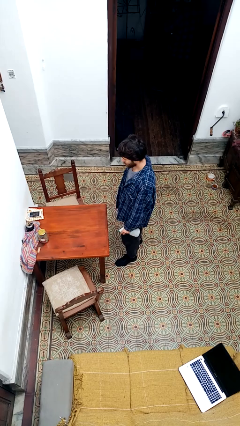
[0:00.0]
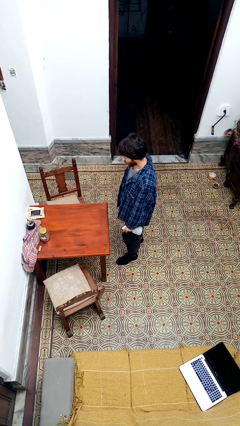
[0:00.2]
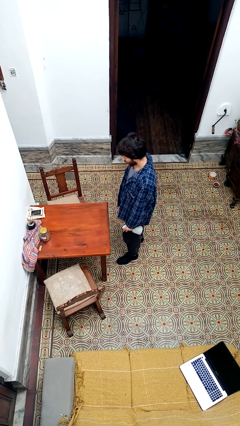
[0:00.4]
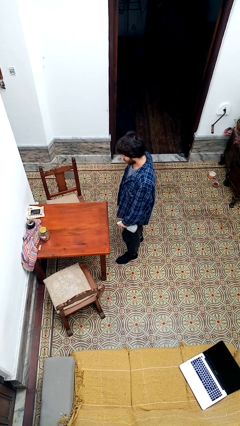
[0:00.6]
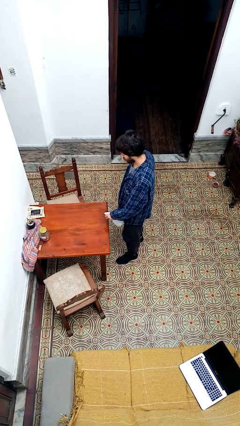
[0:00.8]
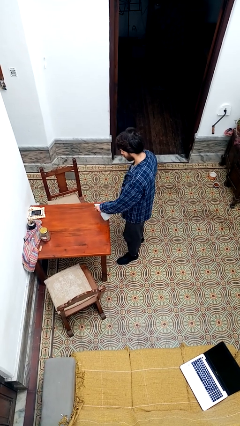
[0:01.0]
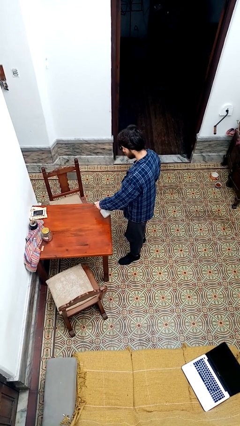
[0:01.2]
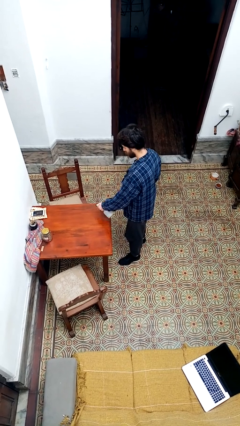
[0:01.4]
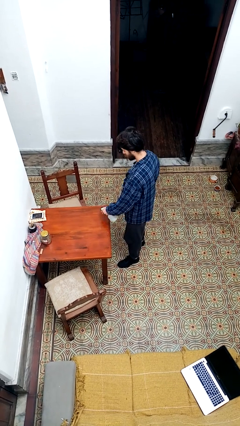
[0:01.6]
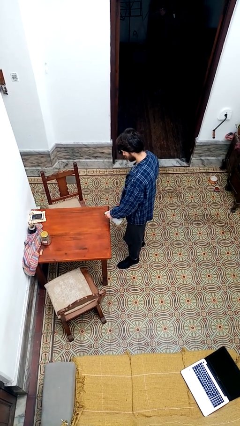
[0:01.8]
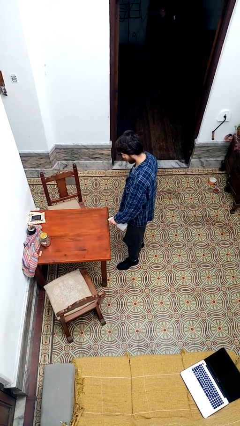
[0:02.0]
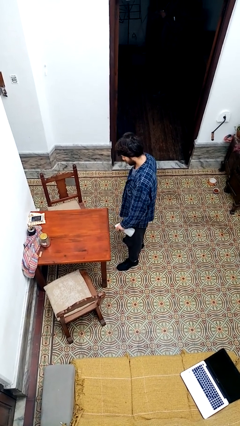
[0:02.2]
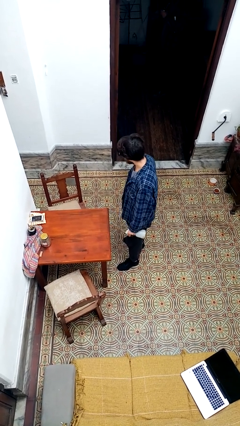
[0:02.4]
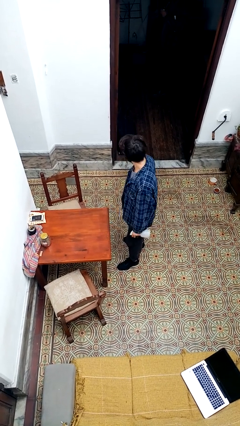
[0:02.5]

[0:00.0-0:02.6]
person sprays from bottle

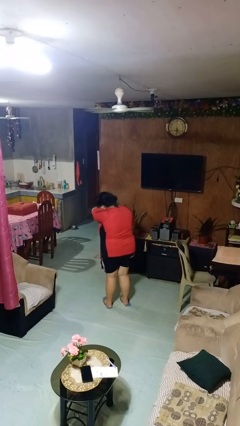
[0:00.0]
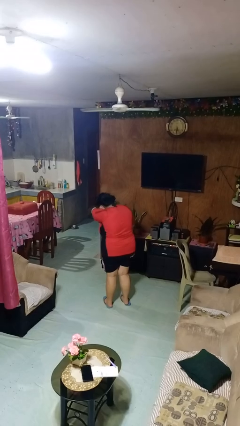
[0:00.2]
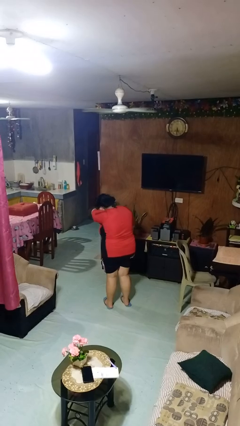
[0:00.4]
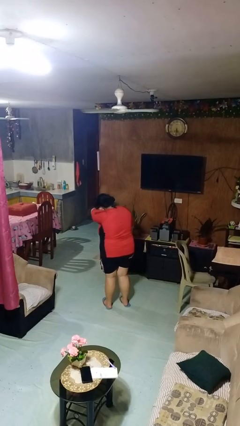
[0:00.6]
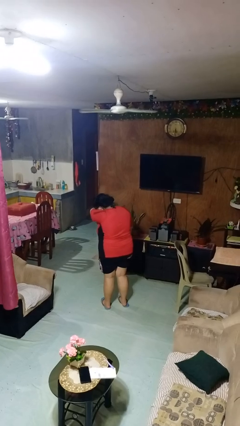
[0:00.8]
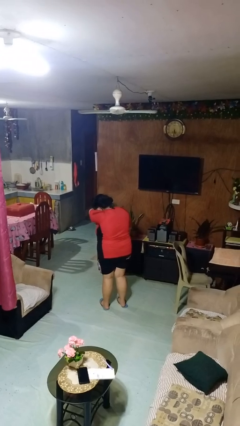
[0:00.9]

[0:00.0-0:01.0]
person sneezes into arm

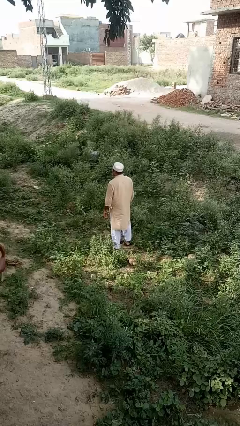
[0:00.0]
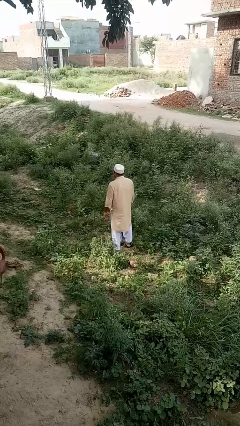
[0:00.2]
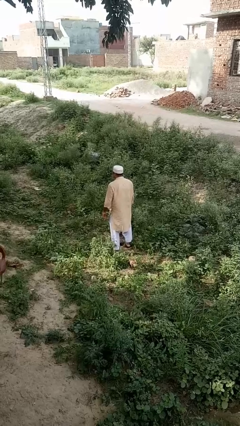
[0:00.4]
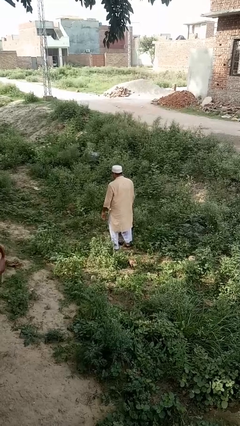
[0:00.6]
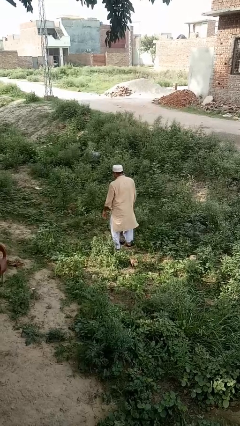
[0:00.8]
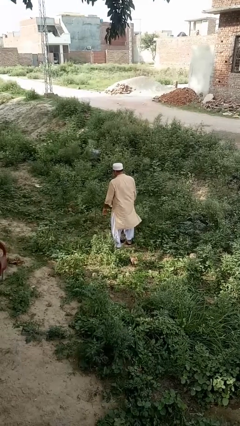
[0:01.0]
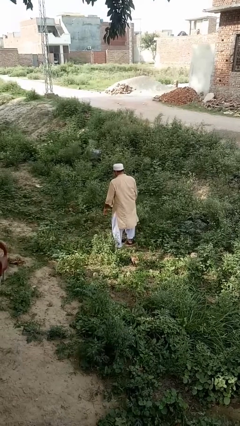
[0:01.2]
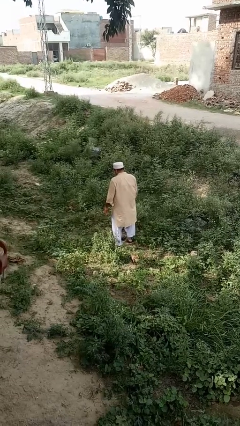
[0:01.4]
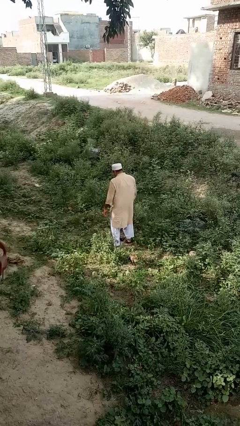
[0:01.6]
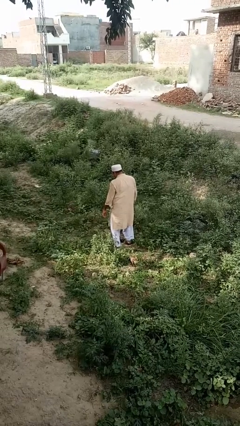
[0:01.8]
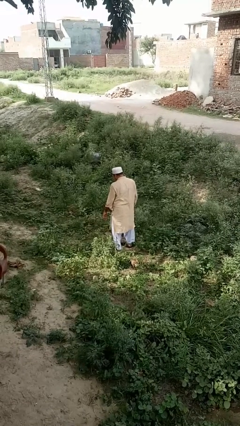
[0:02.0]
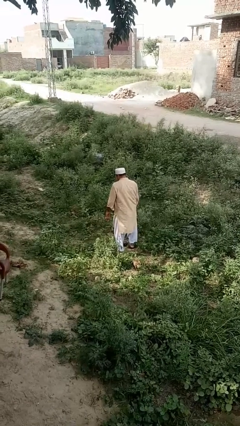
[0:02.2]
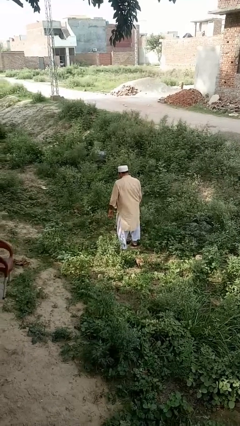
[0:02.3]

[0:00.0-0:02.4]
person wiggles hips

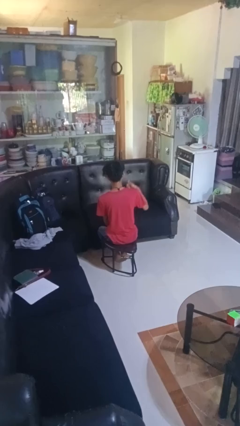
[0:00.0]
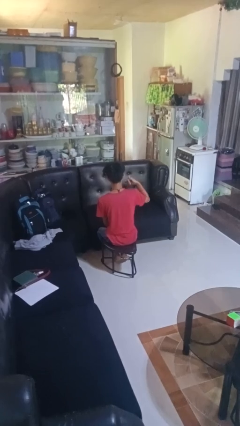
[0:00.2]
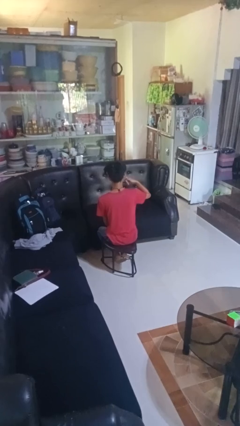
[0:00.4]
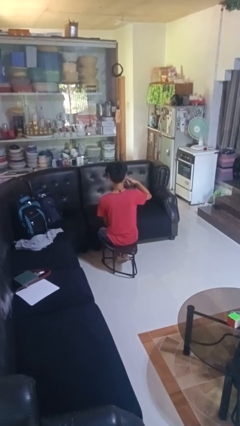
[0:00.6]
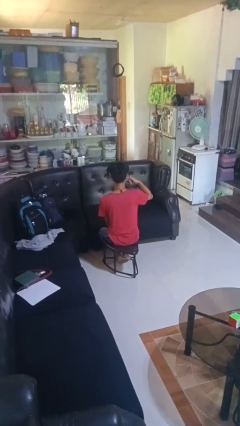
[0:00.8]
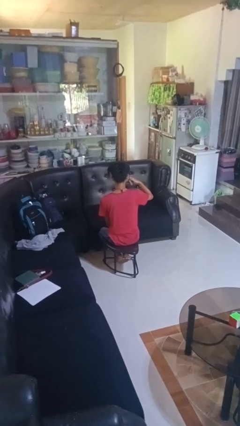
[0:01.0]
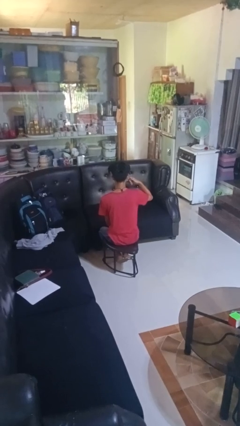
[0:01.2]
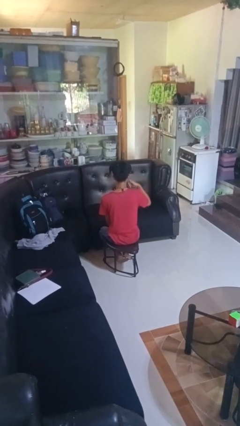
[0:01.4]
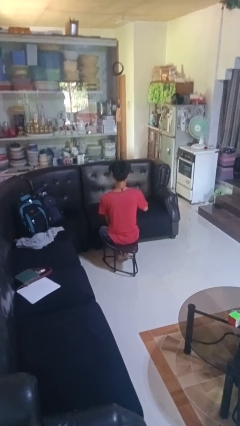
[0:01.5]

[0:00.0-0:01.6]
person gestures call me

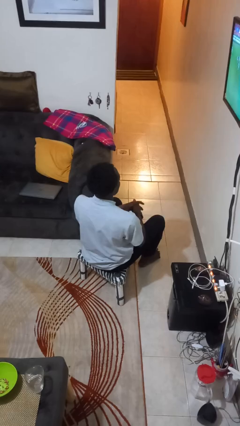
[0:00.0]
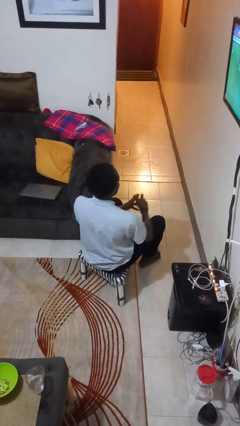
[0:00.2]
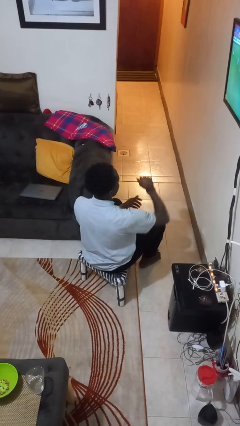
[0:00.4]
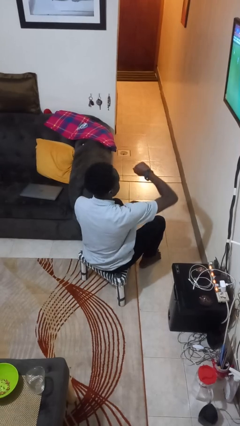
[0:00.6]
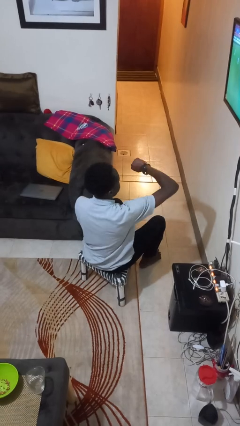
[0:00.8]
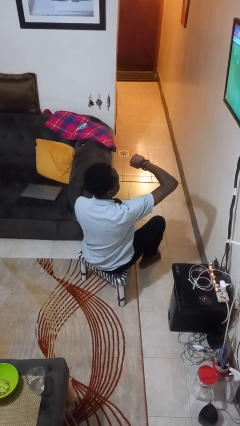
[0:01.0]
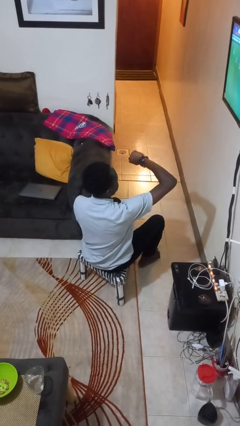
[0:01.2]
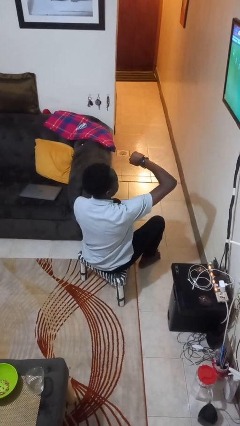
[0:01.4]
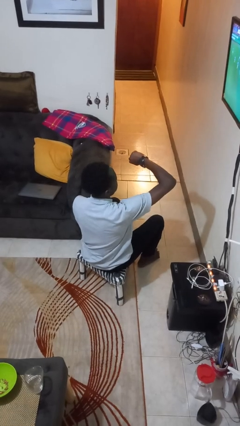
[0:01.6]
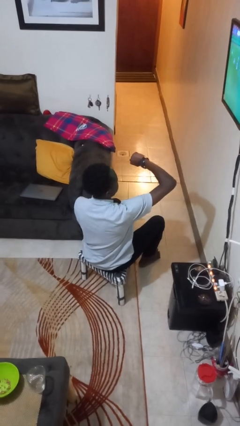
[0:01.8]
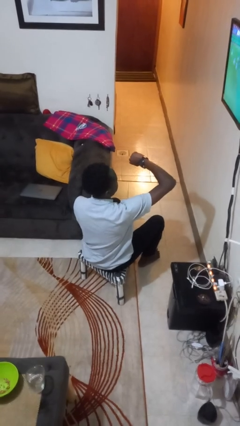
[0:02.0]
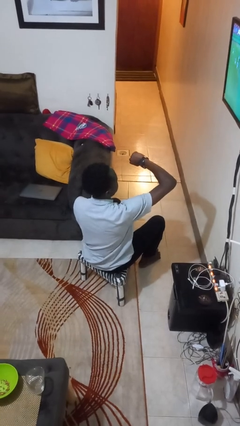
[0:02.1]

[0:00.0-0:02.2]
person looks at wristwatch

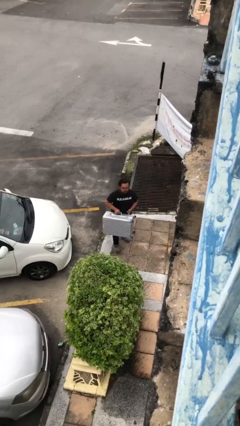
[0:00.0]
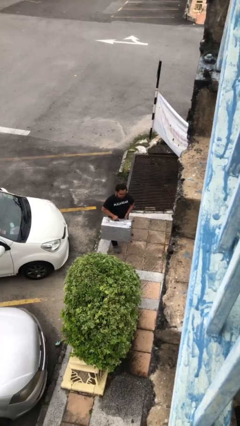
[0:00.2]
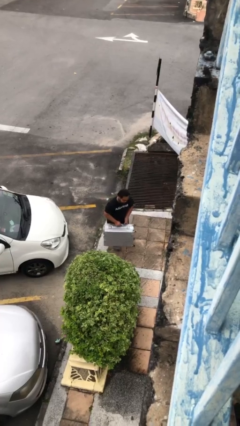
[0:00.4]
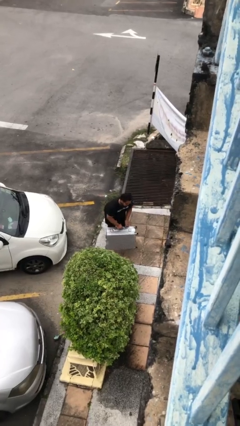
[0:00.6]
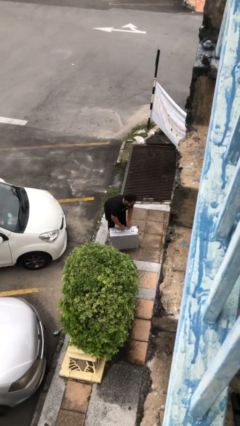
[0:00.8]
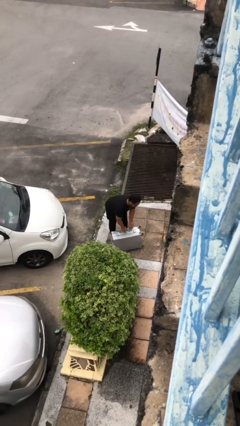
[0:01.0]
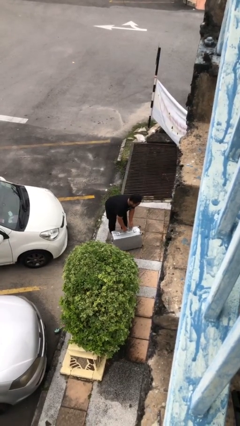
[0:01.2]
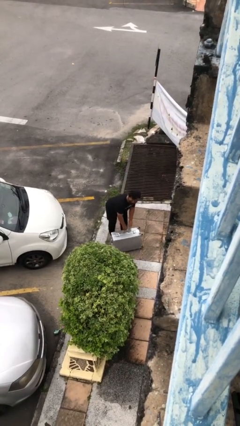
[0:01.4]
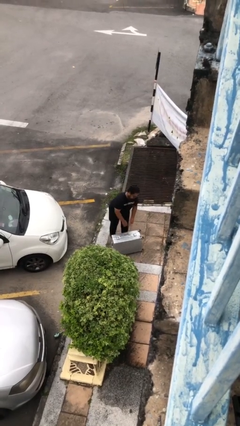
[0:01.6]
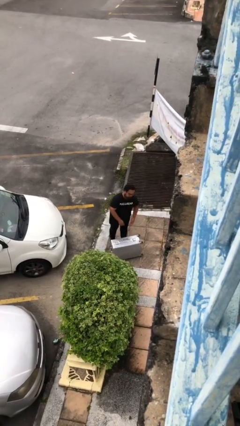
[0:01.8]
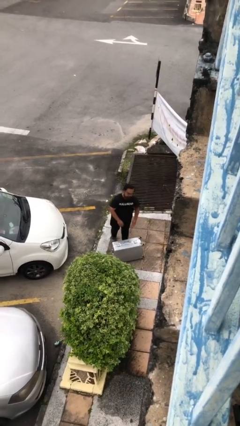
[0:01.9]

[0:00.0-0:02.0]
person puts down object on floor

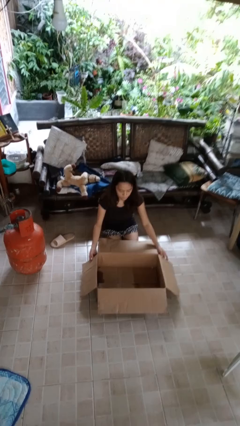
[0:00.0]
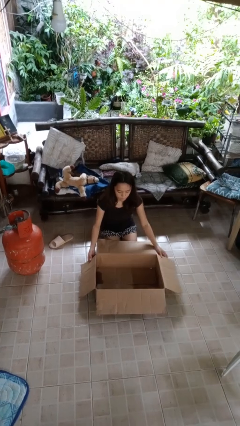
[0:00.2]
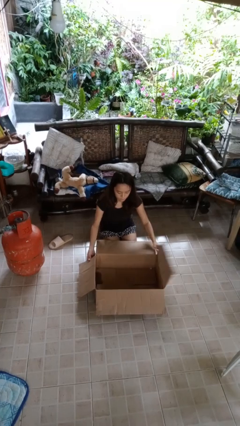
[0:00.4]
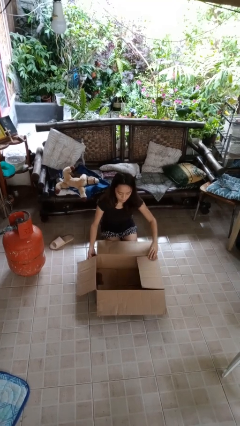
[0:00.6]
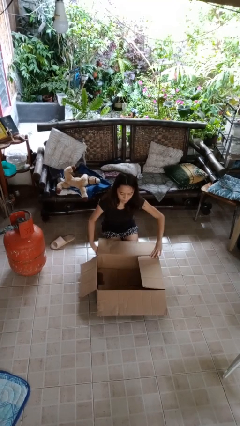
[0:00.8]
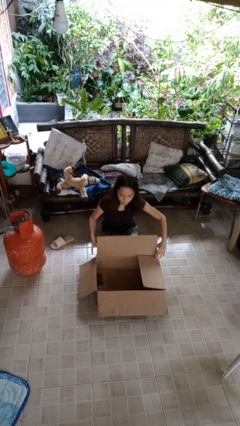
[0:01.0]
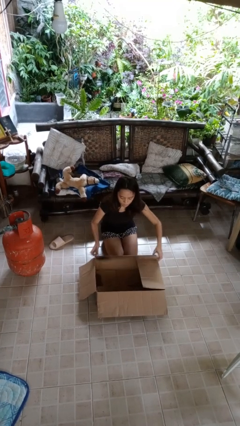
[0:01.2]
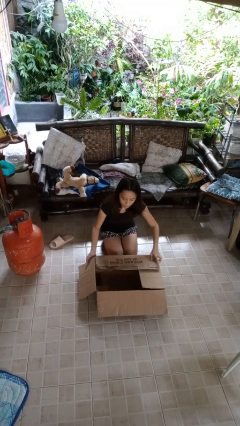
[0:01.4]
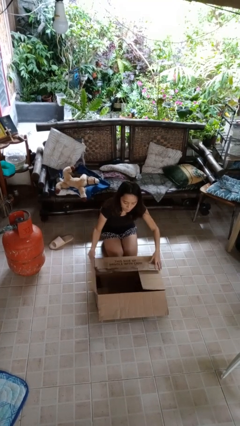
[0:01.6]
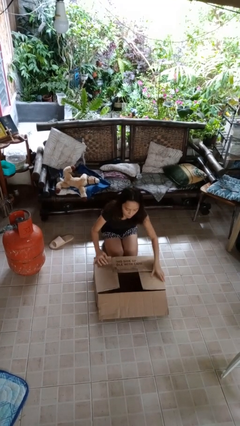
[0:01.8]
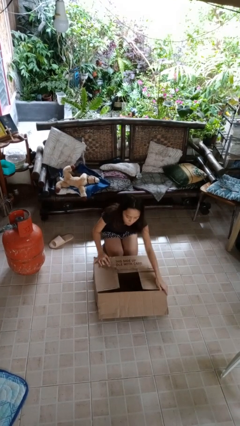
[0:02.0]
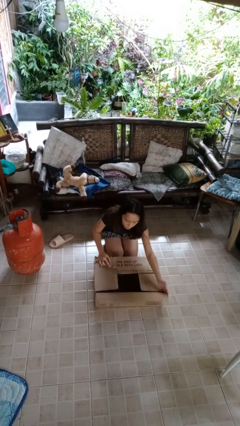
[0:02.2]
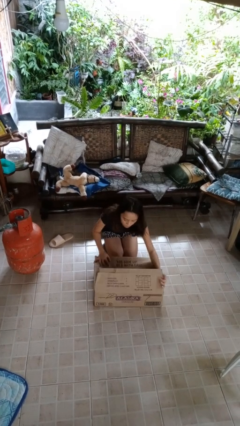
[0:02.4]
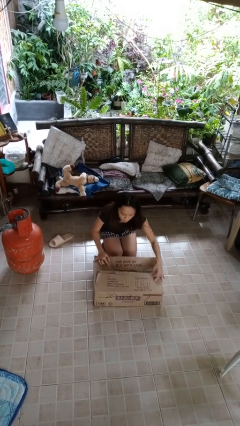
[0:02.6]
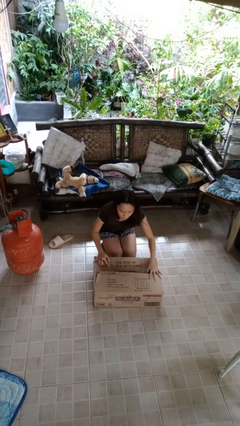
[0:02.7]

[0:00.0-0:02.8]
person closes box

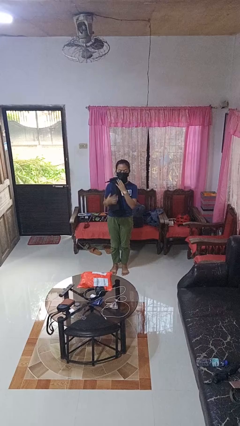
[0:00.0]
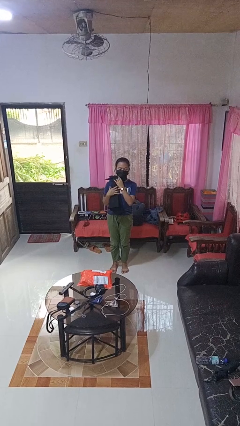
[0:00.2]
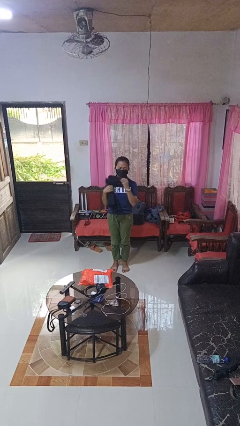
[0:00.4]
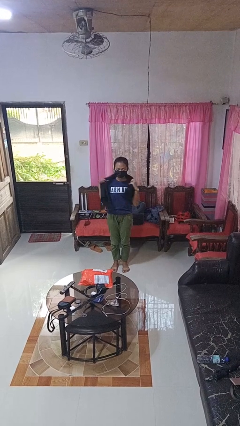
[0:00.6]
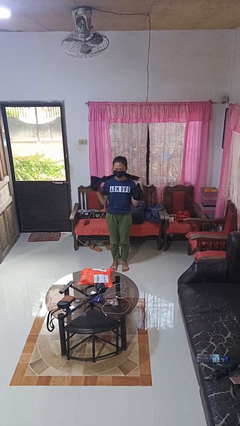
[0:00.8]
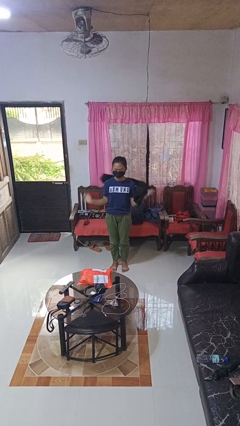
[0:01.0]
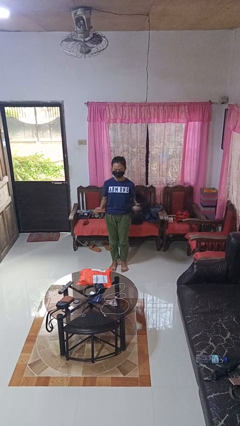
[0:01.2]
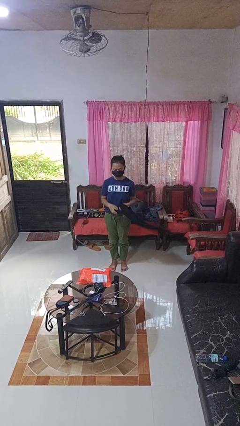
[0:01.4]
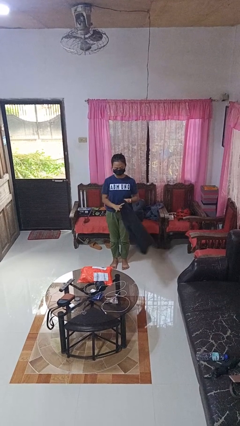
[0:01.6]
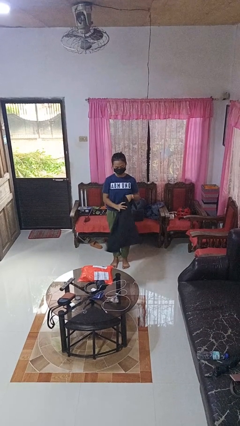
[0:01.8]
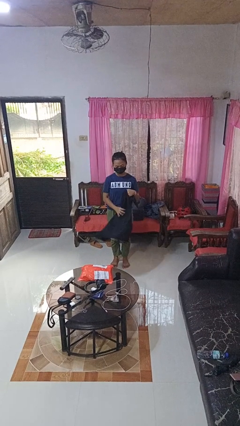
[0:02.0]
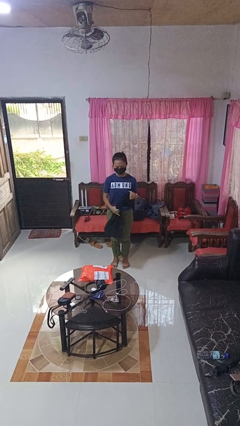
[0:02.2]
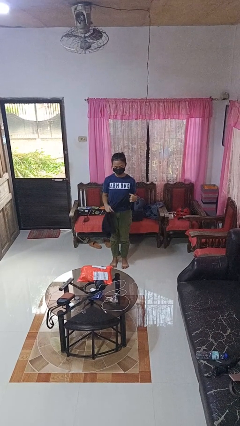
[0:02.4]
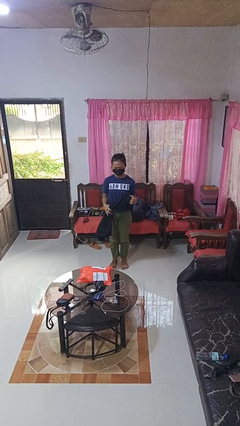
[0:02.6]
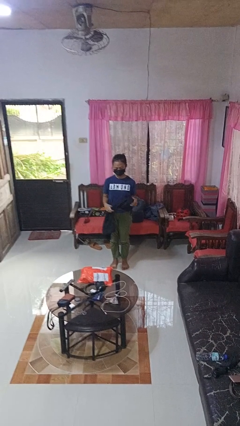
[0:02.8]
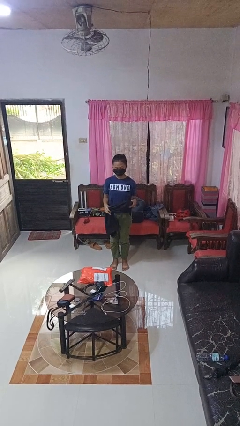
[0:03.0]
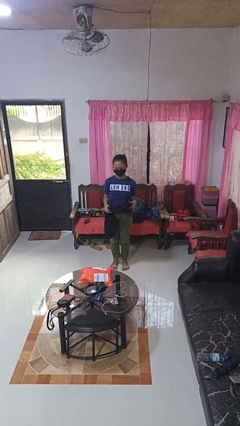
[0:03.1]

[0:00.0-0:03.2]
person takes off scarf
